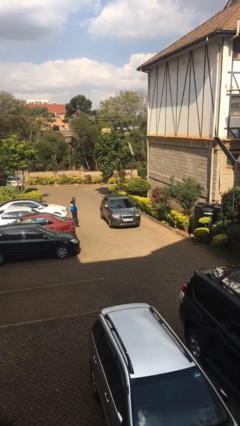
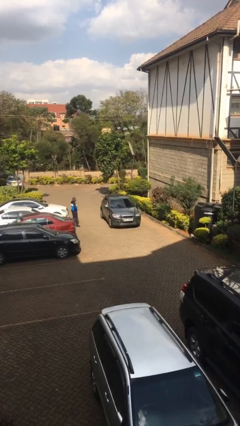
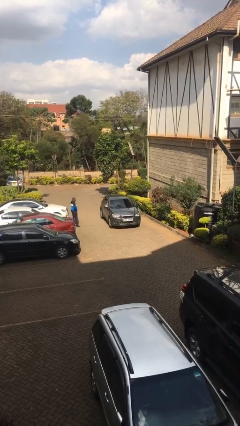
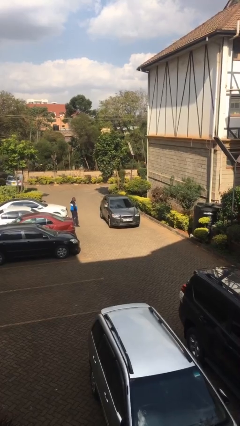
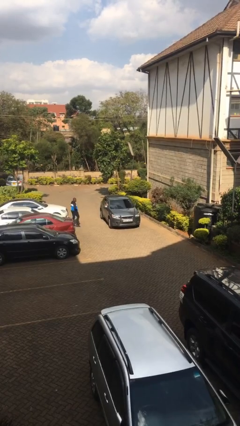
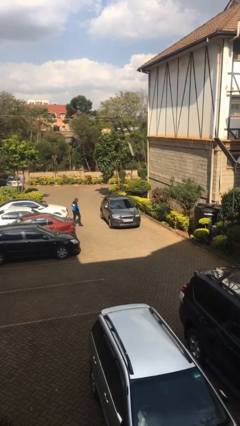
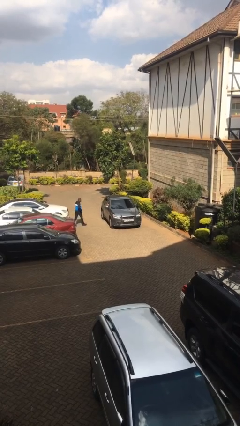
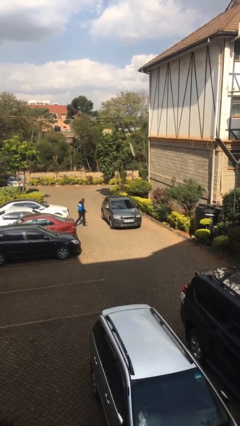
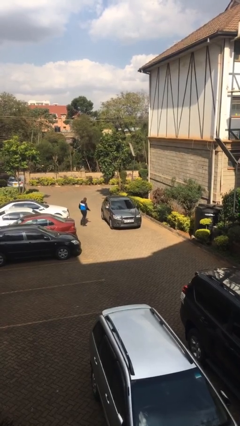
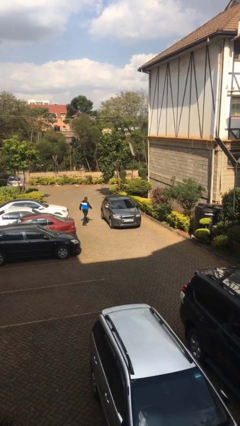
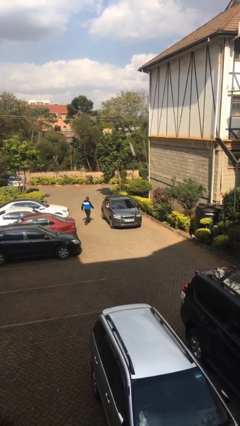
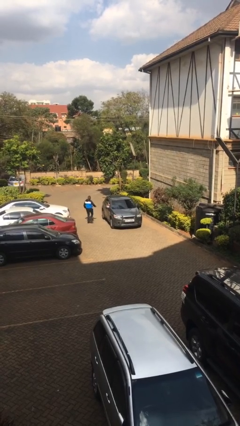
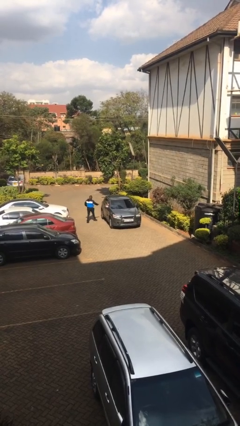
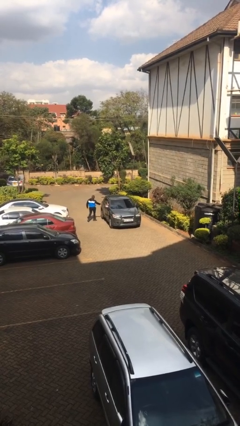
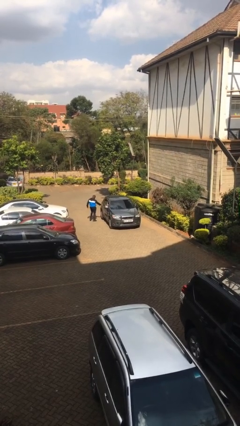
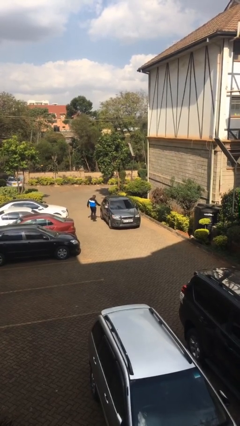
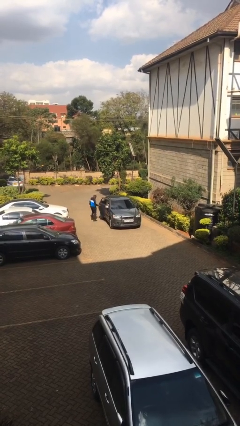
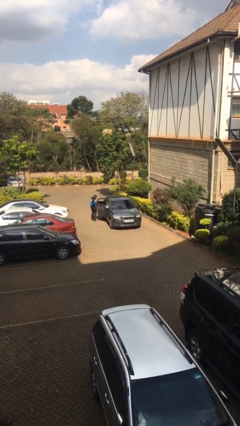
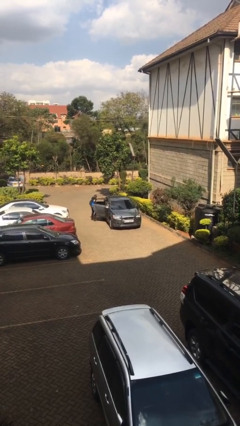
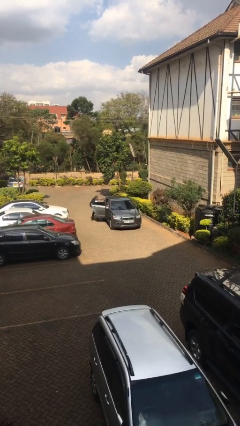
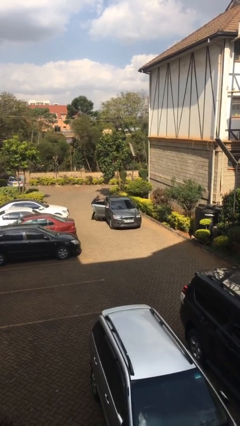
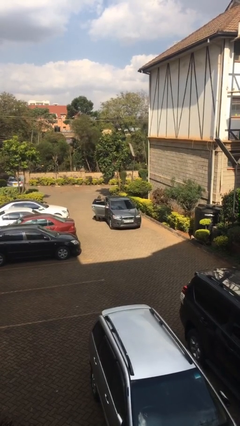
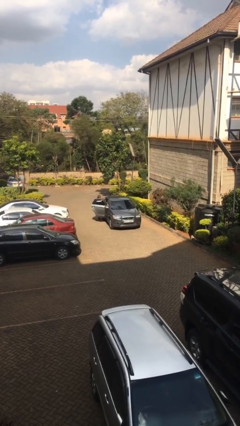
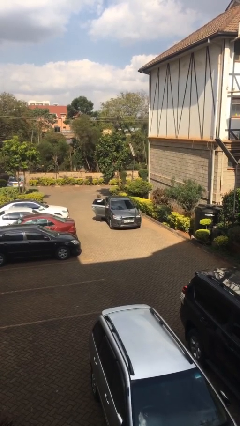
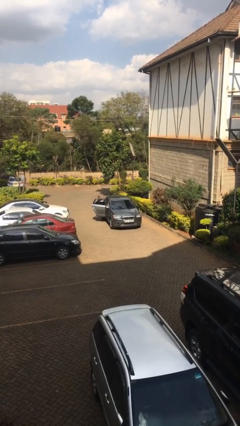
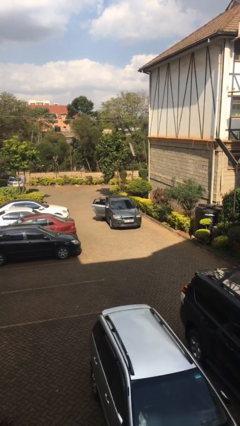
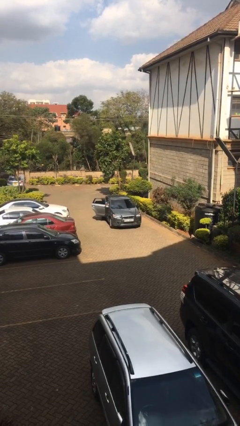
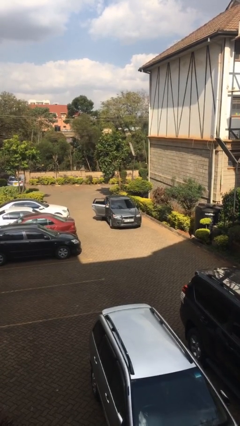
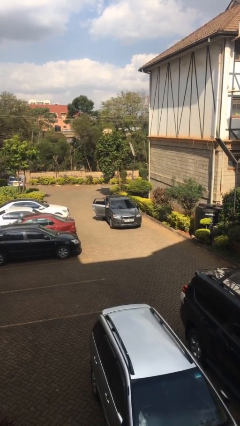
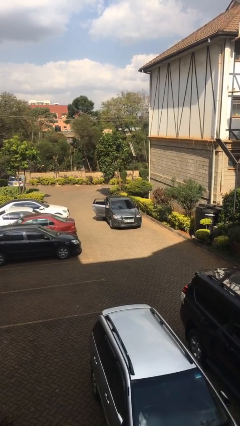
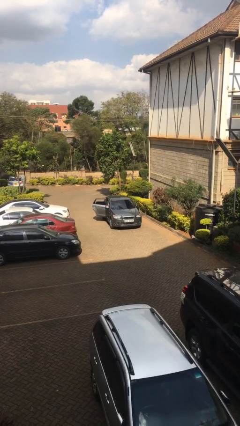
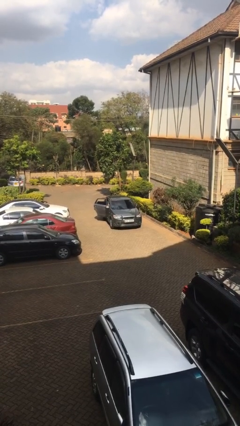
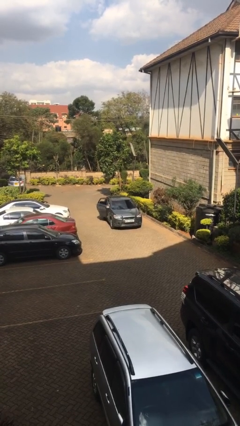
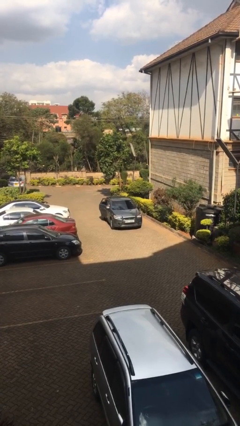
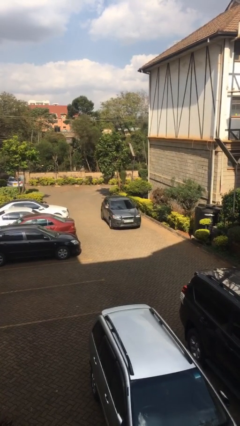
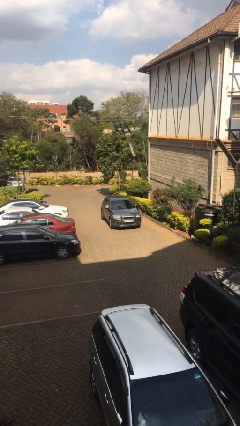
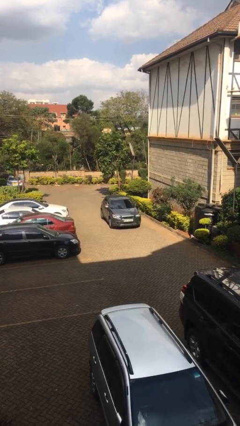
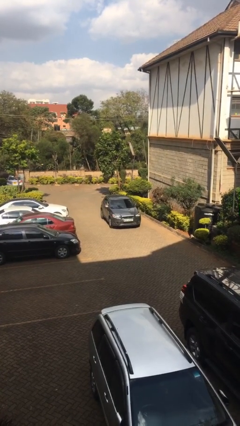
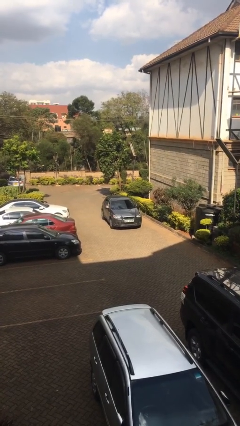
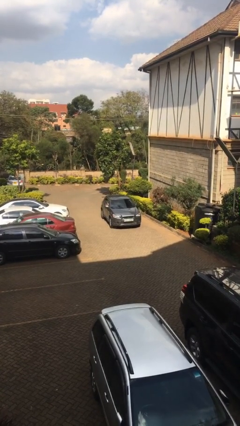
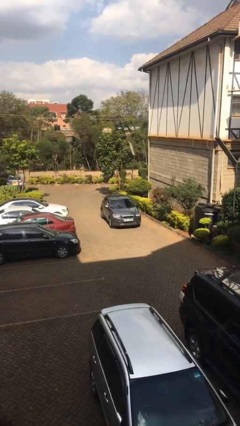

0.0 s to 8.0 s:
car picks up person

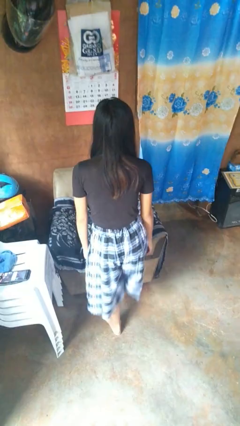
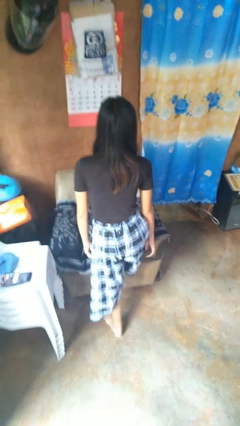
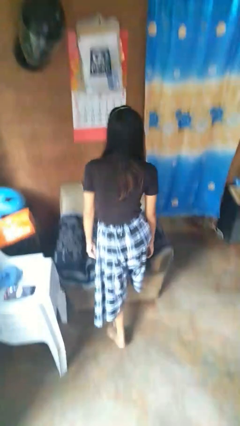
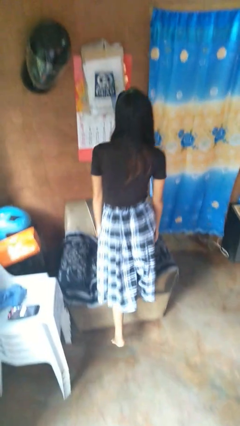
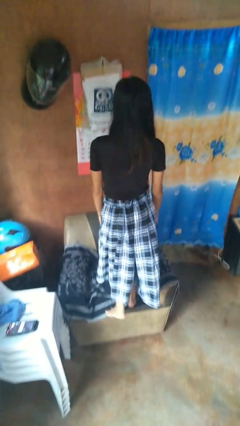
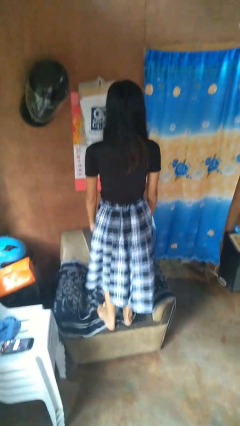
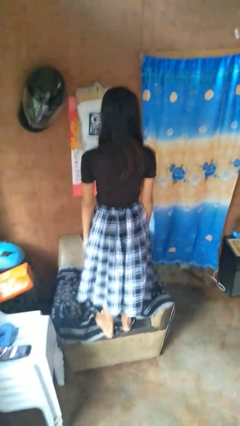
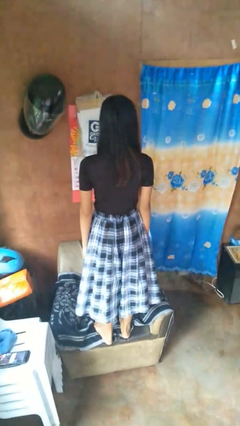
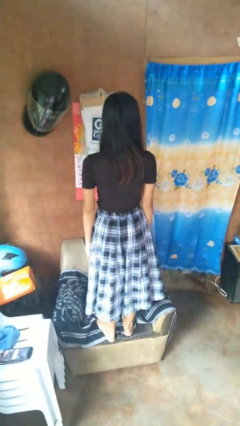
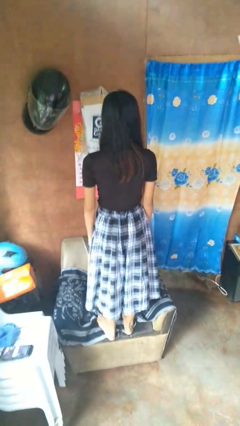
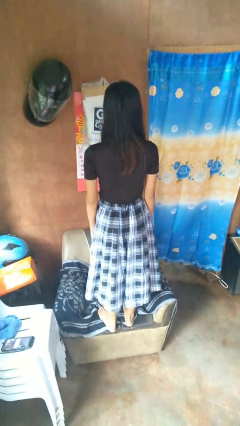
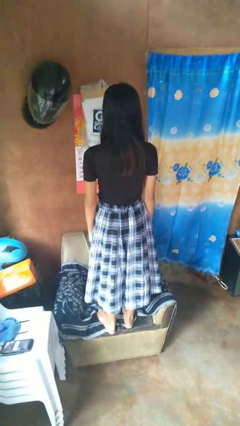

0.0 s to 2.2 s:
person climbs on couch

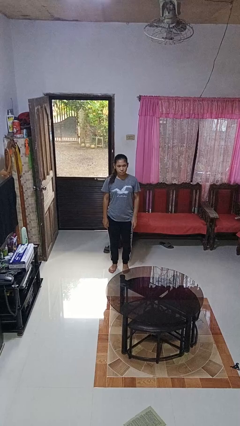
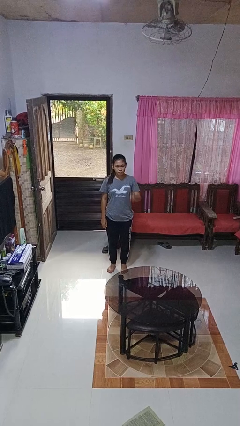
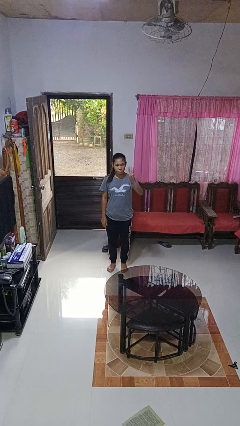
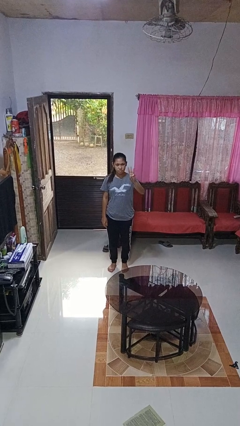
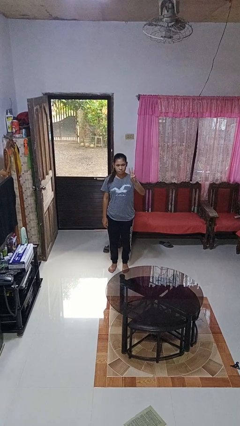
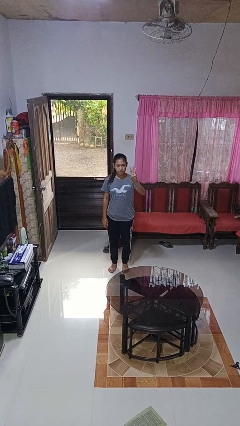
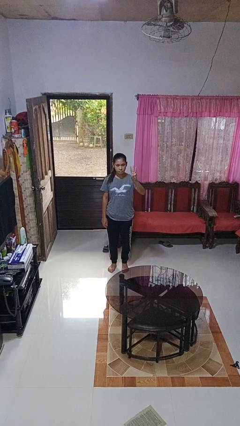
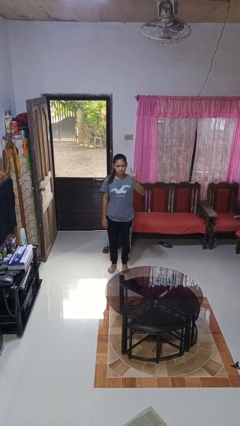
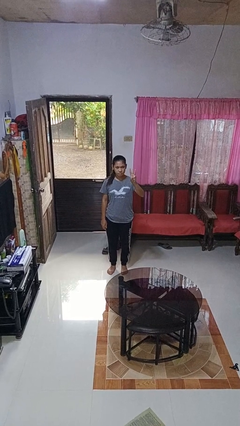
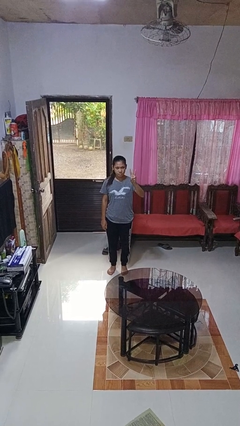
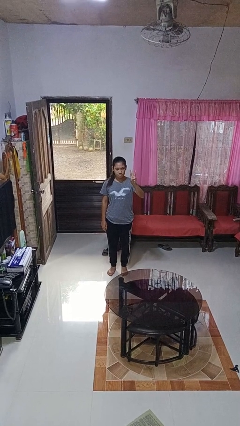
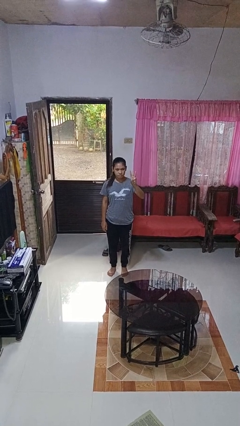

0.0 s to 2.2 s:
person gestures number three

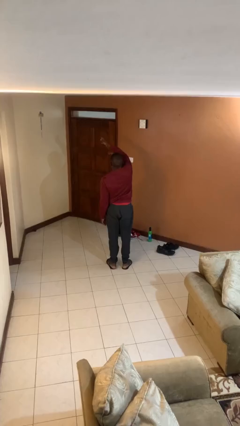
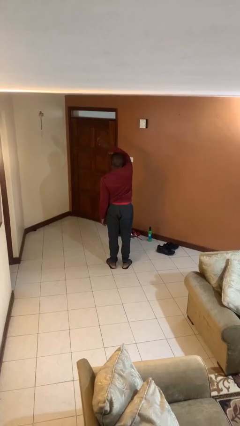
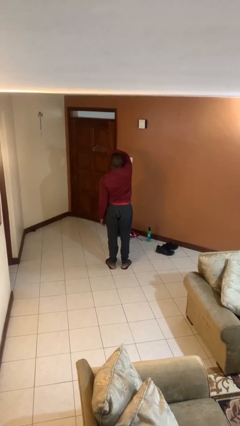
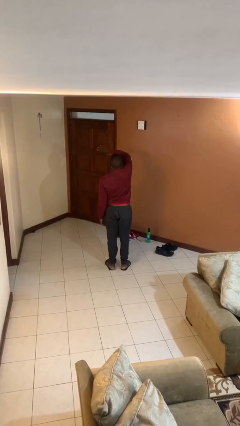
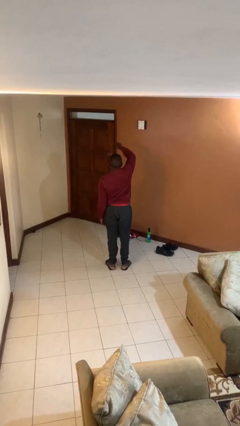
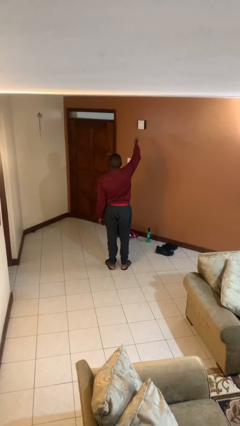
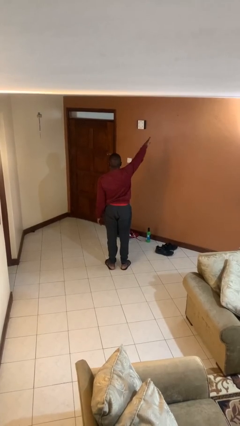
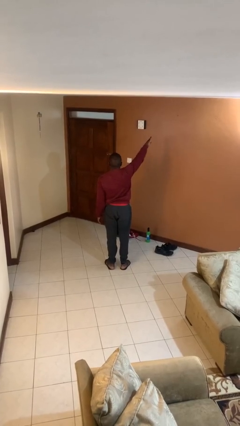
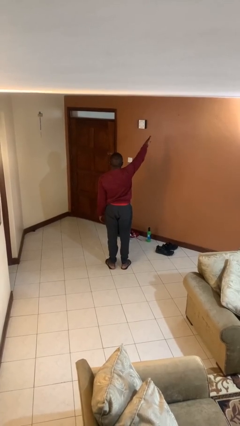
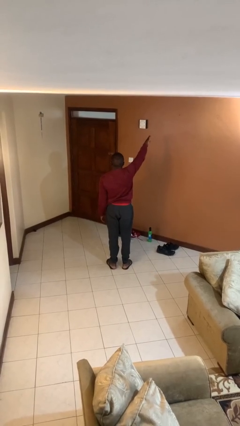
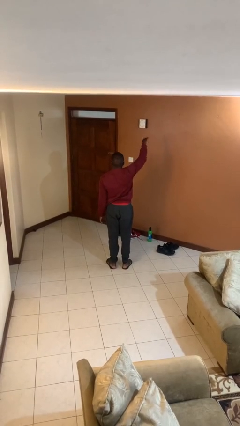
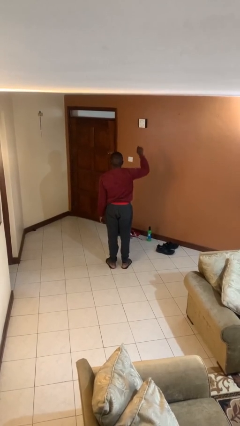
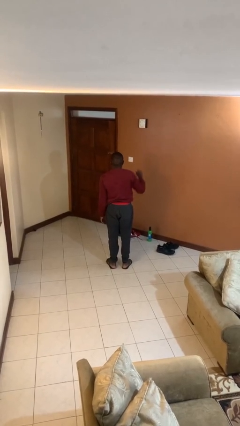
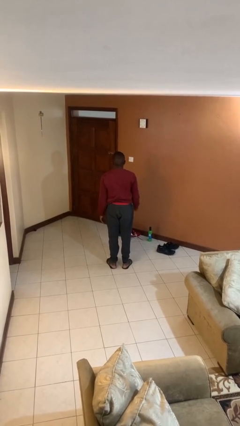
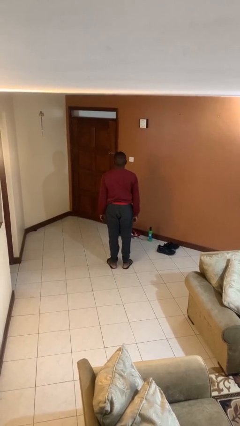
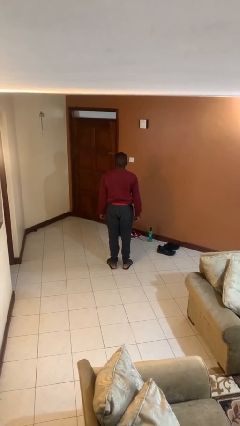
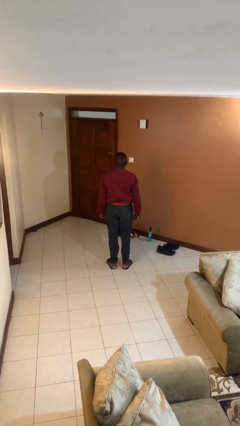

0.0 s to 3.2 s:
person gestures swipe right

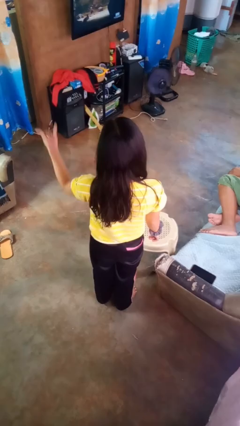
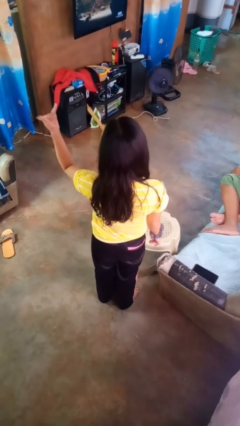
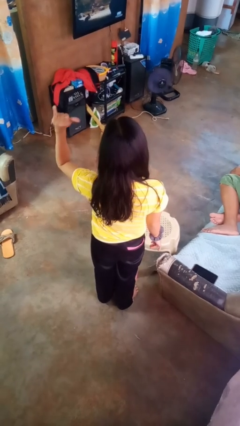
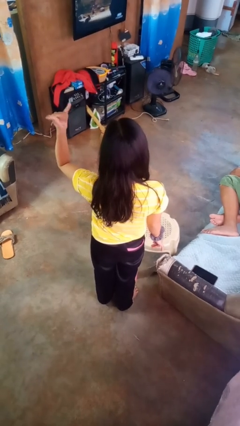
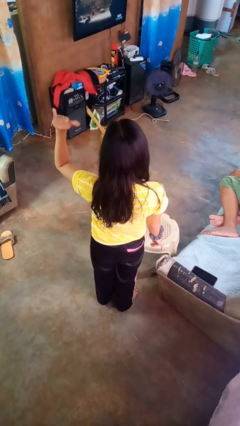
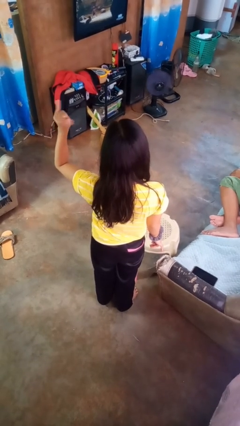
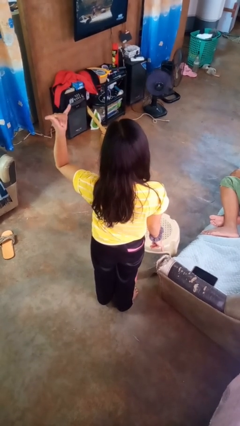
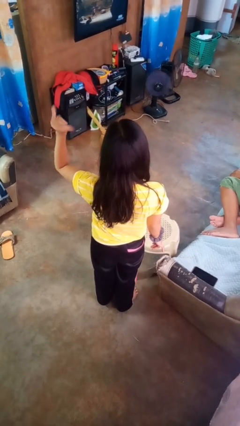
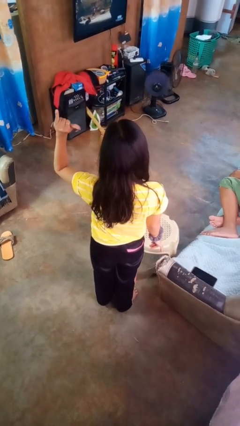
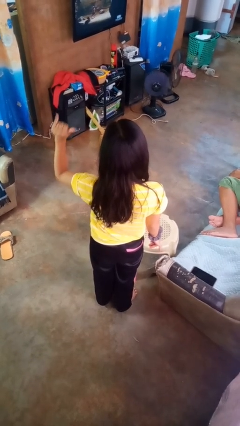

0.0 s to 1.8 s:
person gestures hang loose

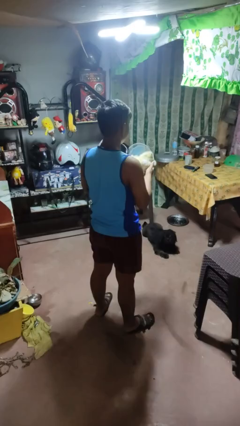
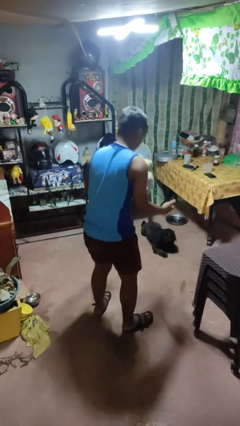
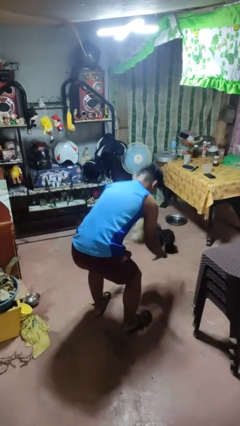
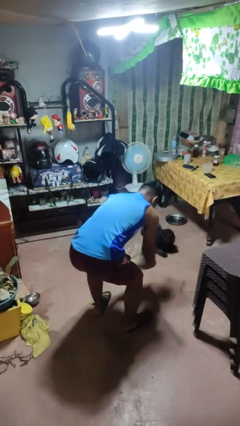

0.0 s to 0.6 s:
person drops object
